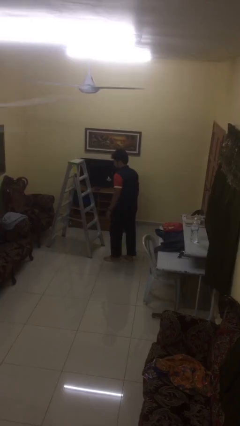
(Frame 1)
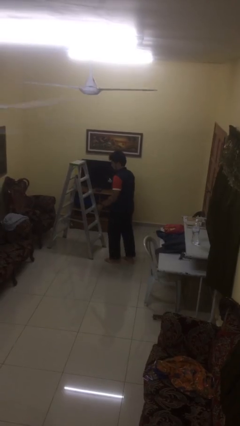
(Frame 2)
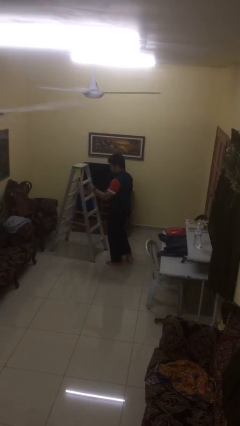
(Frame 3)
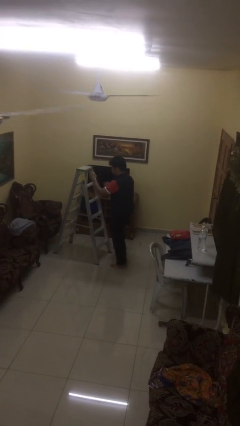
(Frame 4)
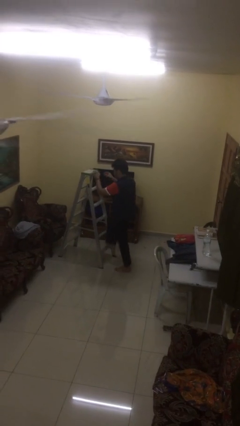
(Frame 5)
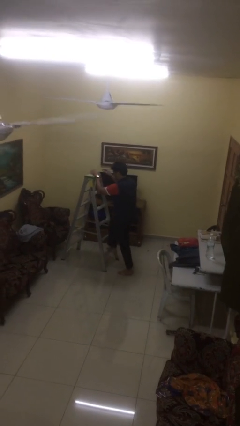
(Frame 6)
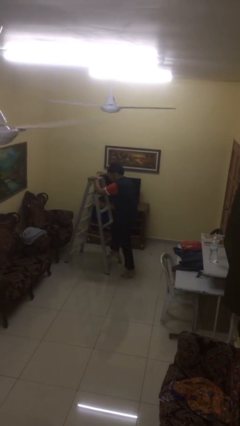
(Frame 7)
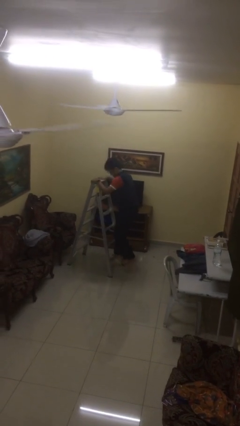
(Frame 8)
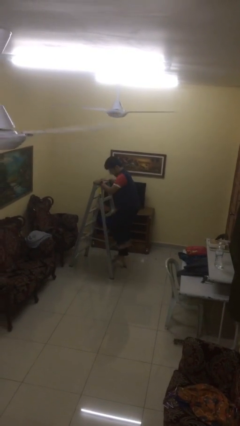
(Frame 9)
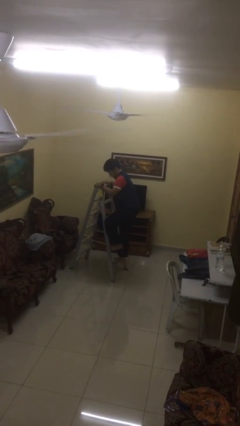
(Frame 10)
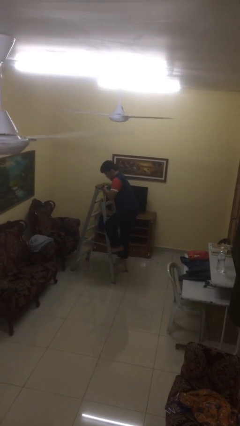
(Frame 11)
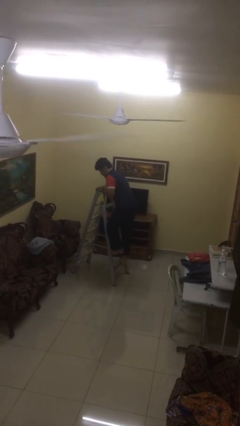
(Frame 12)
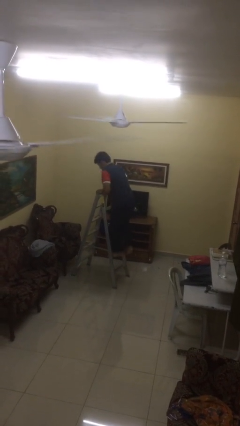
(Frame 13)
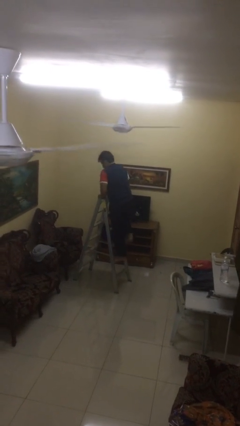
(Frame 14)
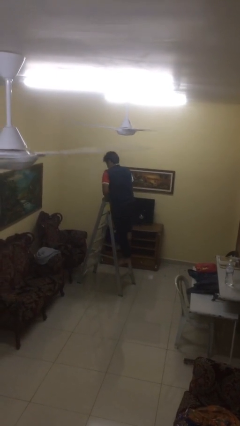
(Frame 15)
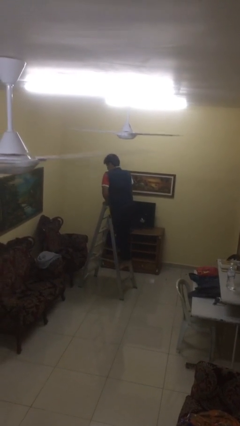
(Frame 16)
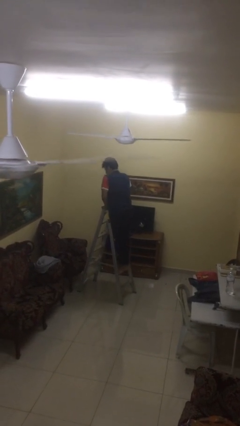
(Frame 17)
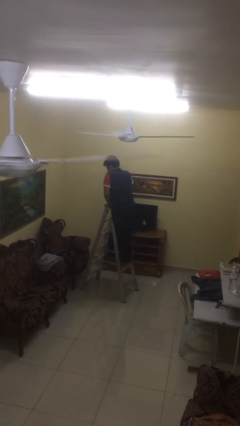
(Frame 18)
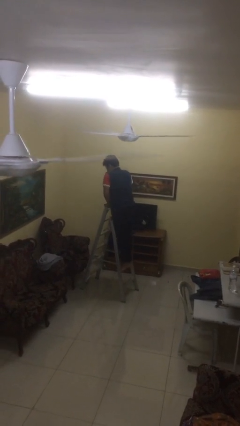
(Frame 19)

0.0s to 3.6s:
person climbs up ladder

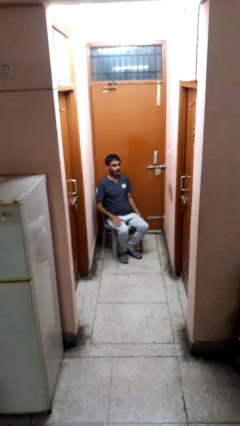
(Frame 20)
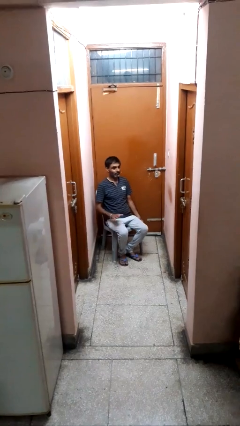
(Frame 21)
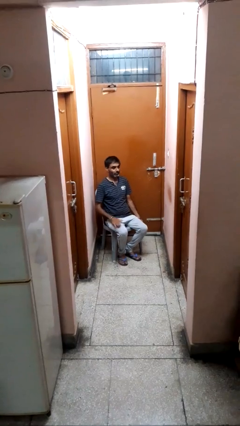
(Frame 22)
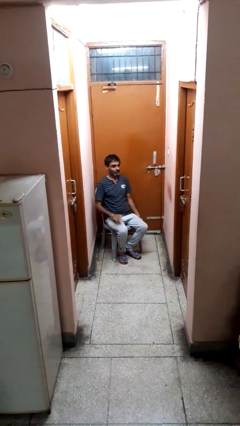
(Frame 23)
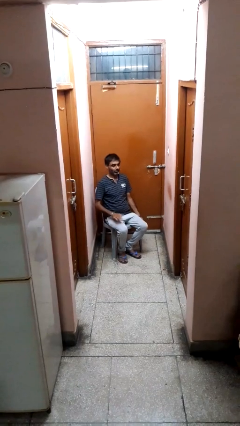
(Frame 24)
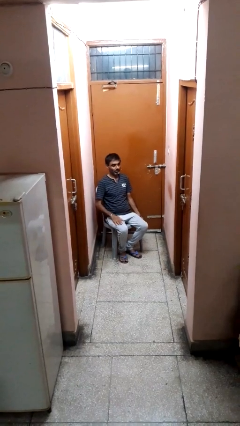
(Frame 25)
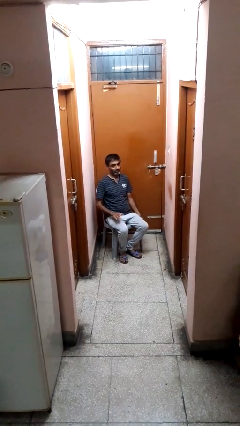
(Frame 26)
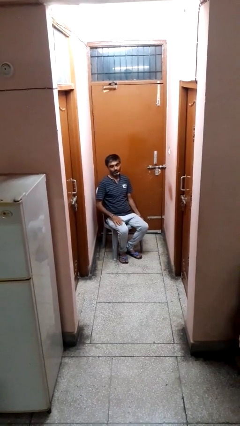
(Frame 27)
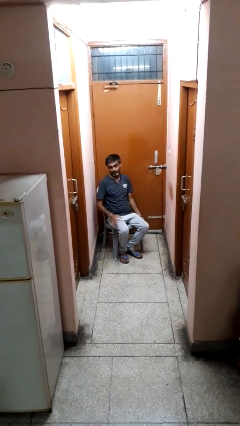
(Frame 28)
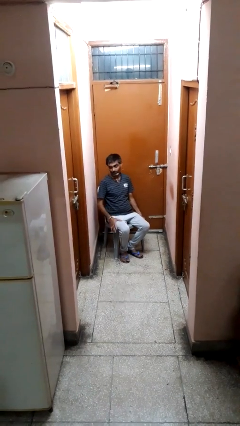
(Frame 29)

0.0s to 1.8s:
person slaps hands on thighs

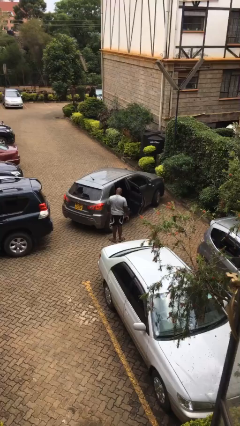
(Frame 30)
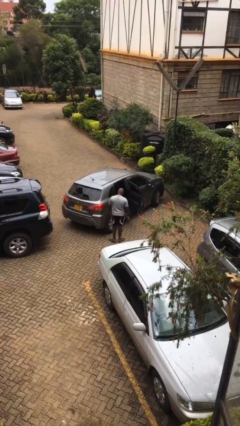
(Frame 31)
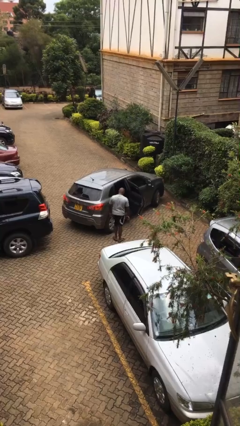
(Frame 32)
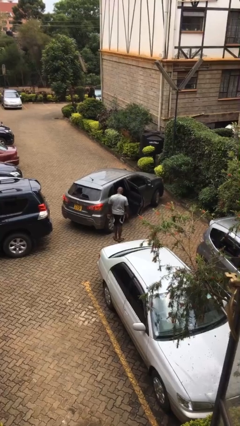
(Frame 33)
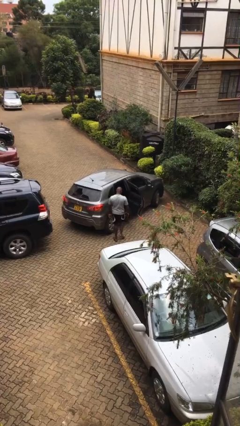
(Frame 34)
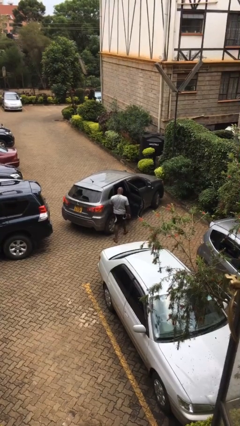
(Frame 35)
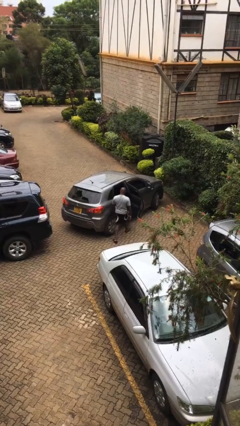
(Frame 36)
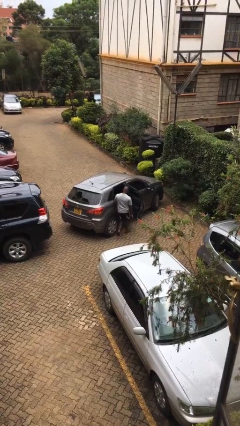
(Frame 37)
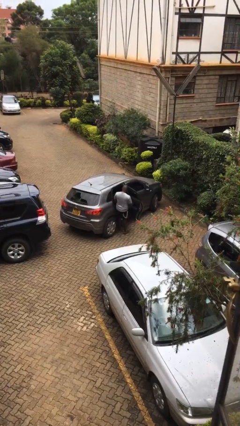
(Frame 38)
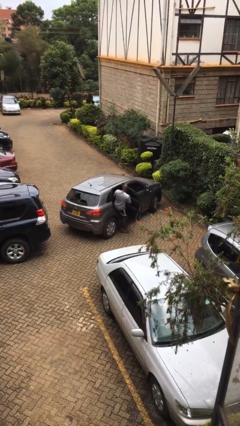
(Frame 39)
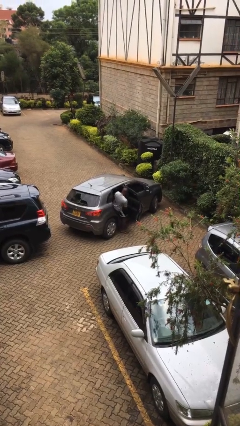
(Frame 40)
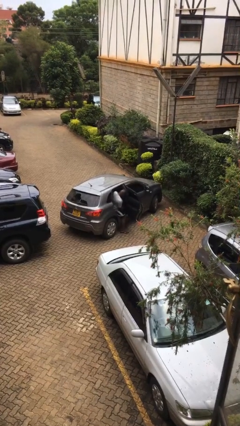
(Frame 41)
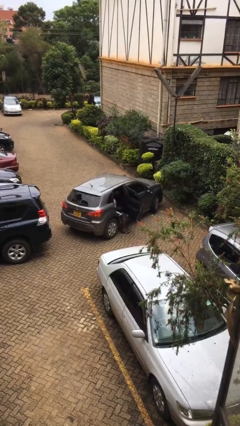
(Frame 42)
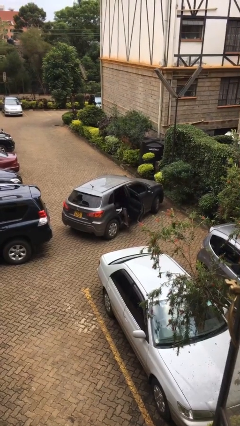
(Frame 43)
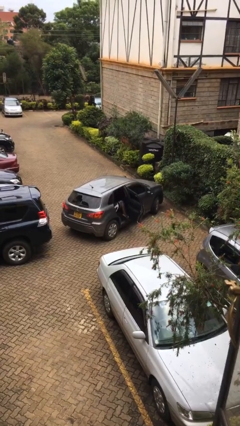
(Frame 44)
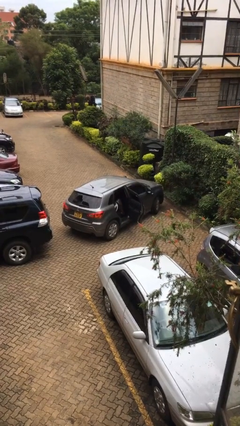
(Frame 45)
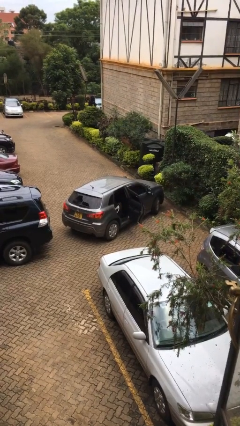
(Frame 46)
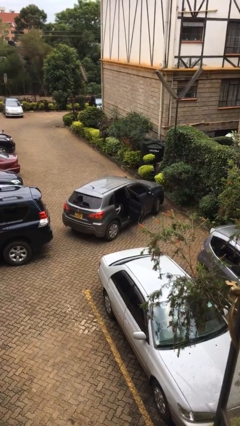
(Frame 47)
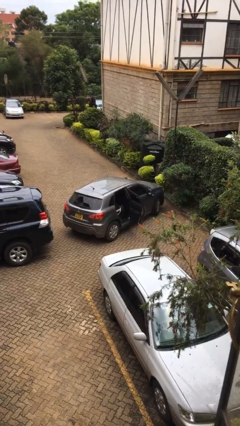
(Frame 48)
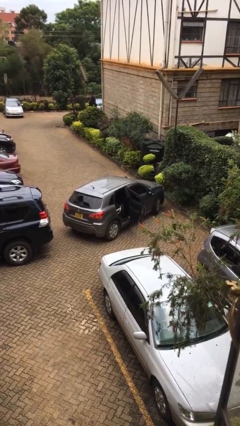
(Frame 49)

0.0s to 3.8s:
person enters car

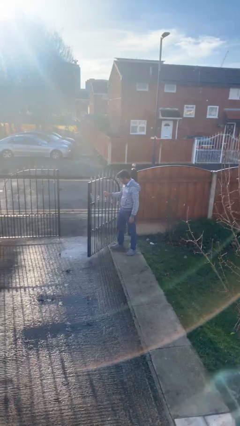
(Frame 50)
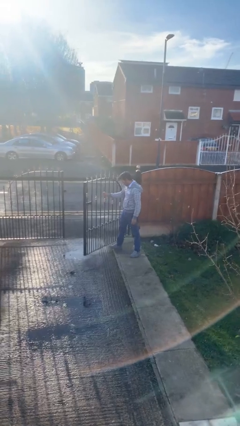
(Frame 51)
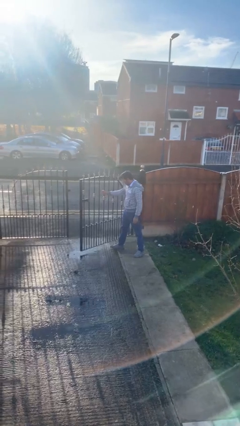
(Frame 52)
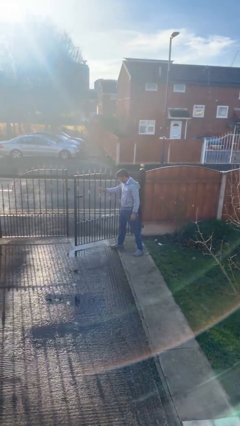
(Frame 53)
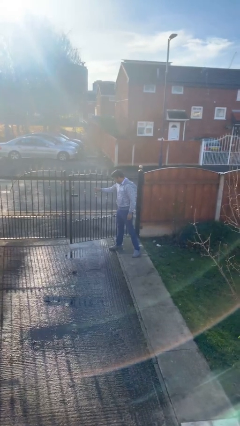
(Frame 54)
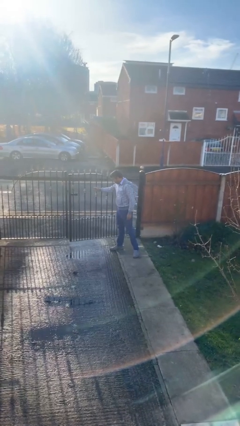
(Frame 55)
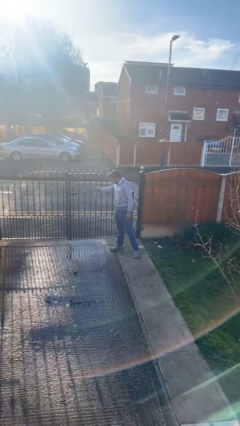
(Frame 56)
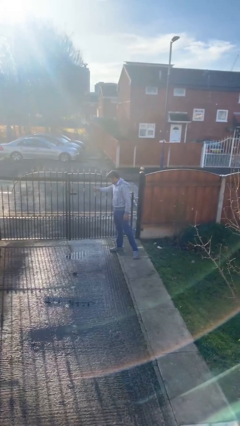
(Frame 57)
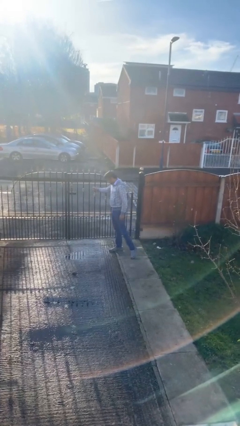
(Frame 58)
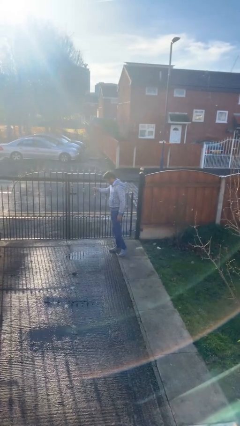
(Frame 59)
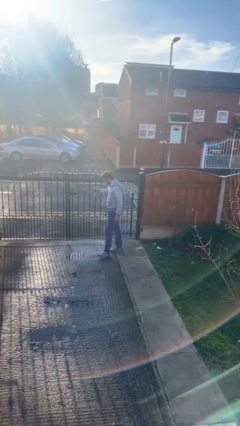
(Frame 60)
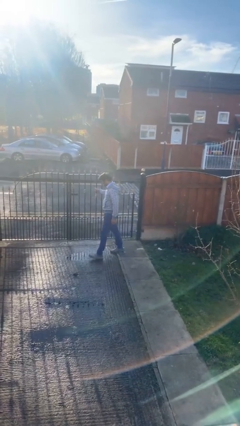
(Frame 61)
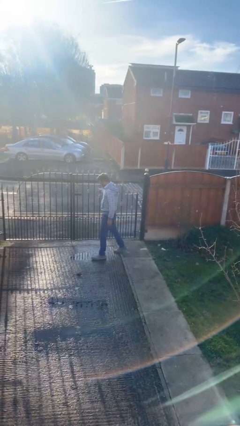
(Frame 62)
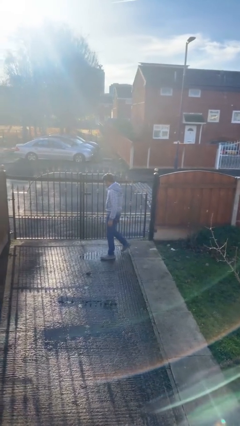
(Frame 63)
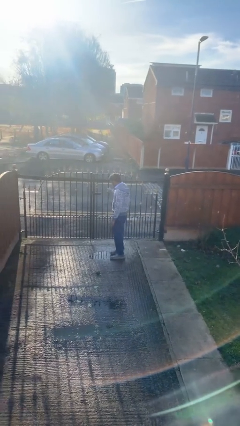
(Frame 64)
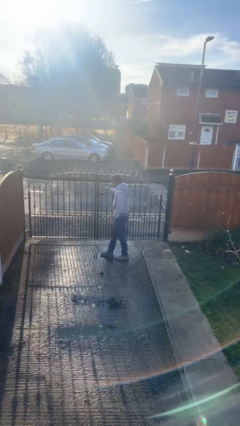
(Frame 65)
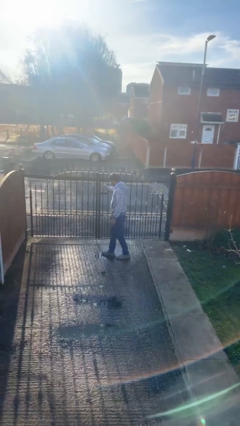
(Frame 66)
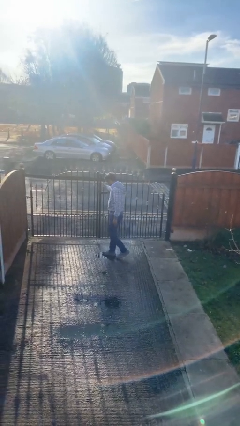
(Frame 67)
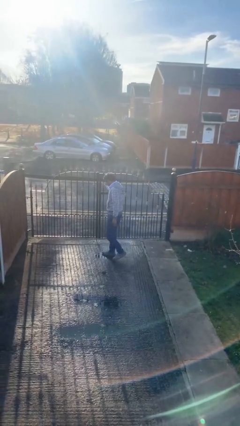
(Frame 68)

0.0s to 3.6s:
person closes facility door

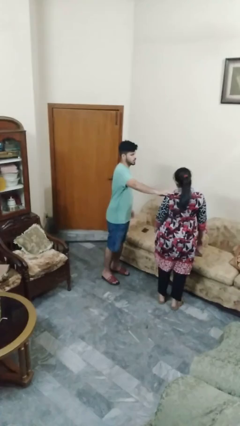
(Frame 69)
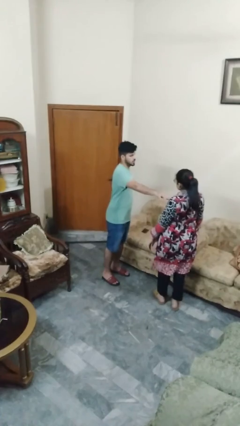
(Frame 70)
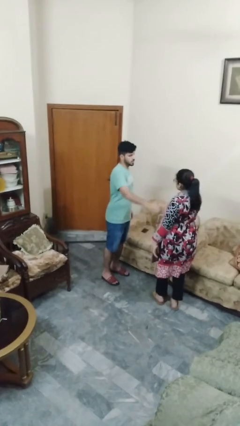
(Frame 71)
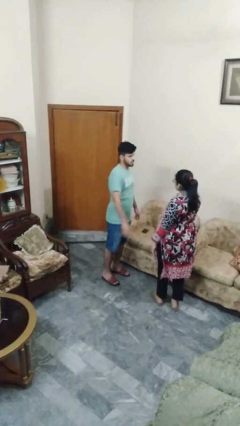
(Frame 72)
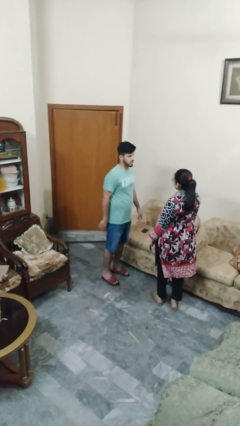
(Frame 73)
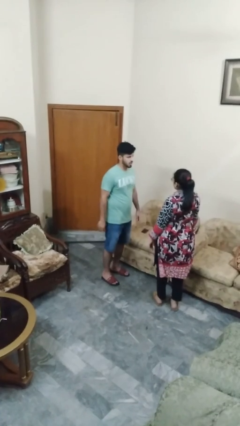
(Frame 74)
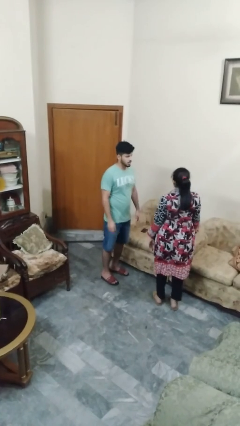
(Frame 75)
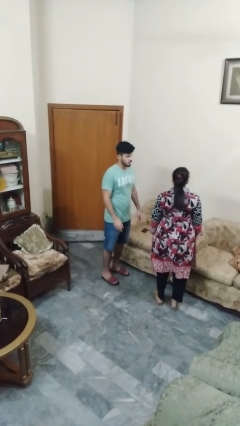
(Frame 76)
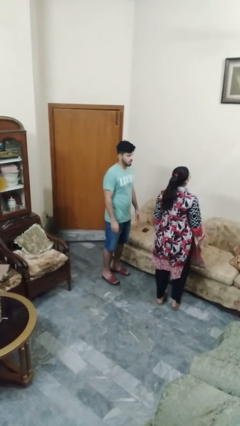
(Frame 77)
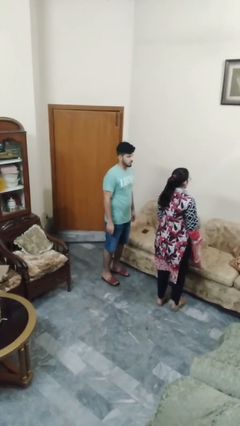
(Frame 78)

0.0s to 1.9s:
person spins person around

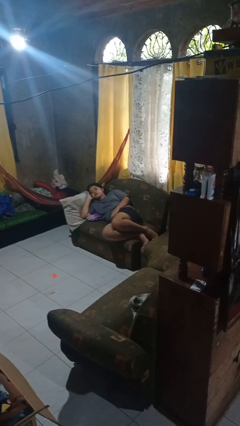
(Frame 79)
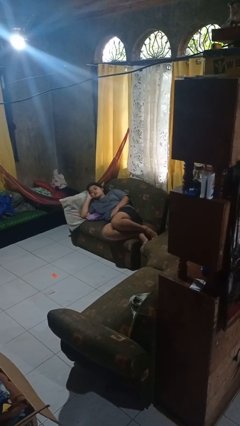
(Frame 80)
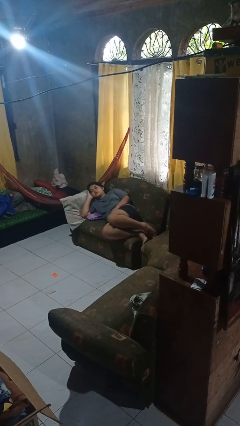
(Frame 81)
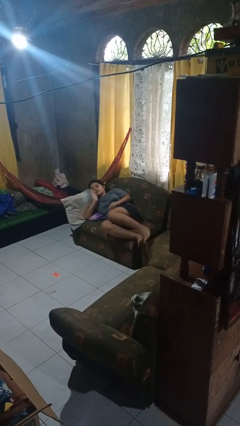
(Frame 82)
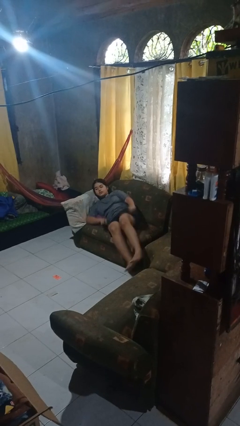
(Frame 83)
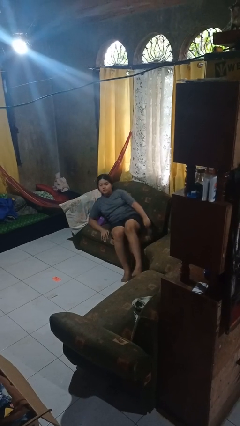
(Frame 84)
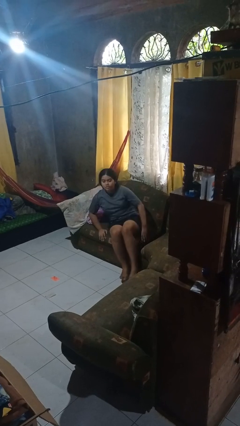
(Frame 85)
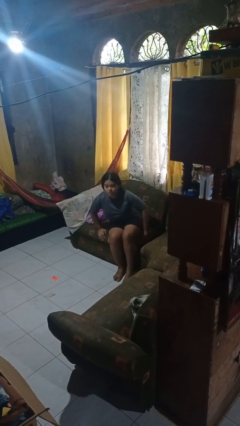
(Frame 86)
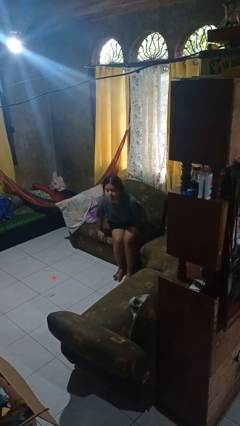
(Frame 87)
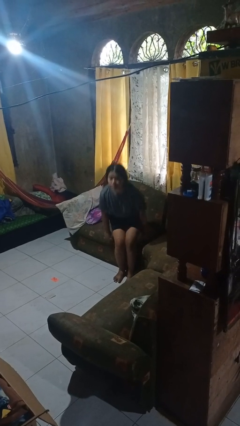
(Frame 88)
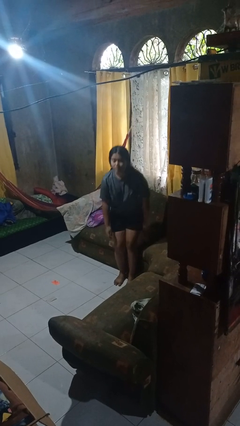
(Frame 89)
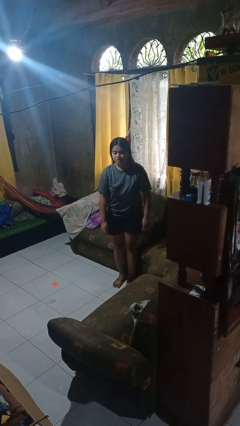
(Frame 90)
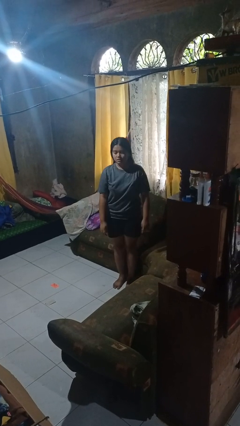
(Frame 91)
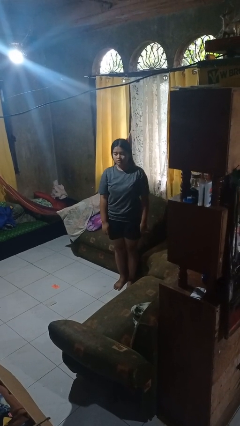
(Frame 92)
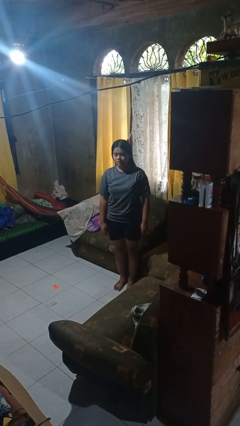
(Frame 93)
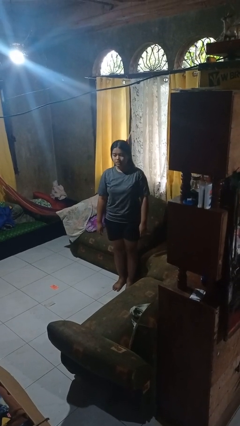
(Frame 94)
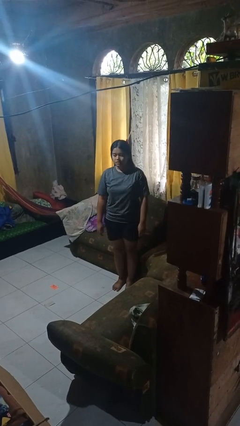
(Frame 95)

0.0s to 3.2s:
person stands up
